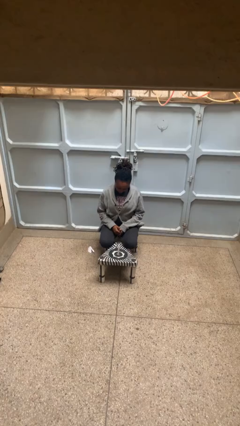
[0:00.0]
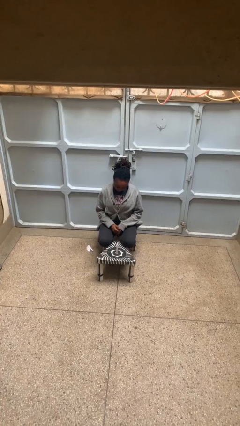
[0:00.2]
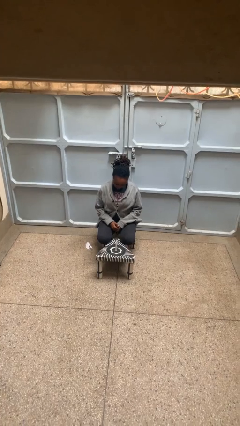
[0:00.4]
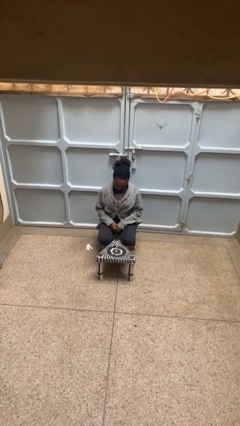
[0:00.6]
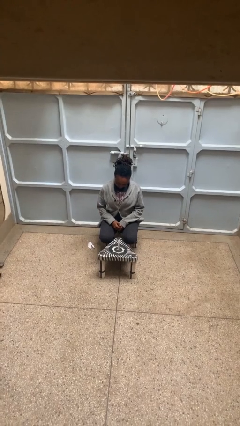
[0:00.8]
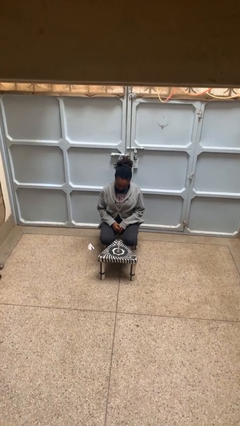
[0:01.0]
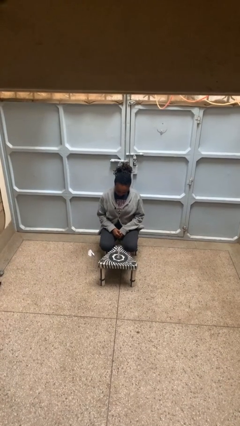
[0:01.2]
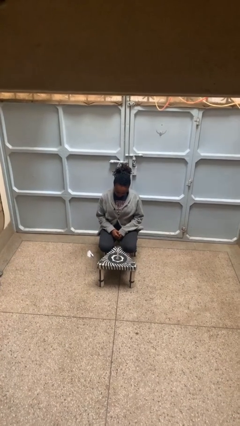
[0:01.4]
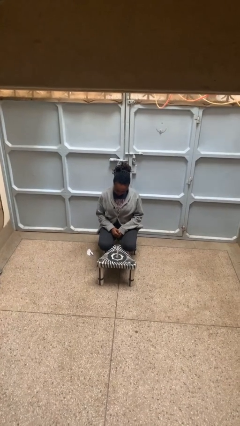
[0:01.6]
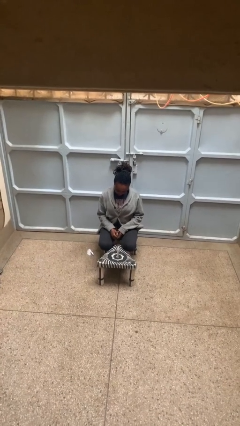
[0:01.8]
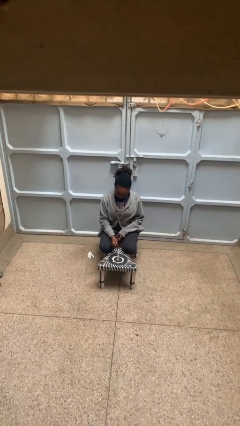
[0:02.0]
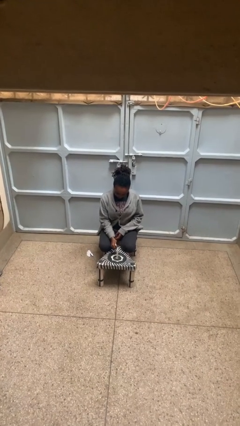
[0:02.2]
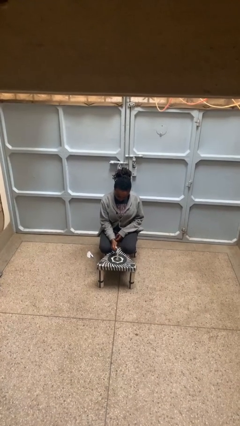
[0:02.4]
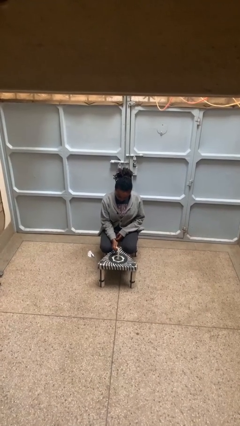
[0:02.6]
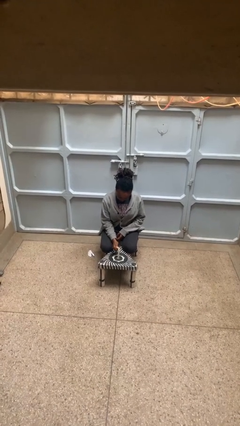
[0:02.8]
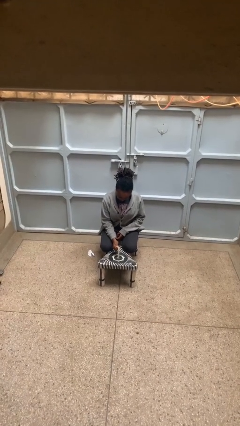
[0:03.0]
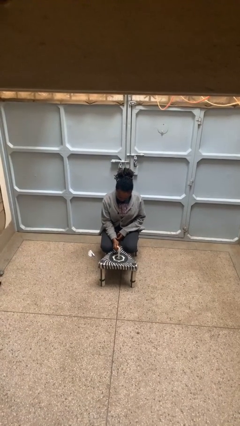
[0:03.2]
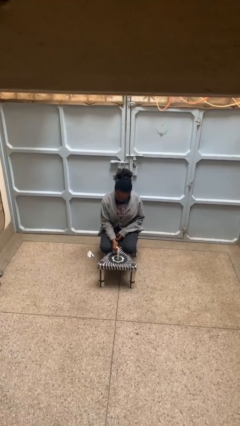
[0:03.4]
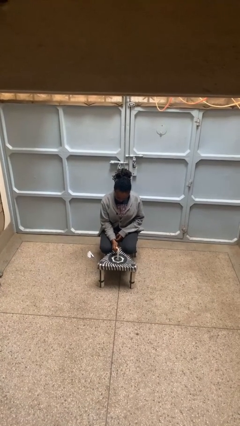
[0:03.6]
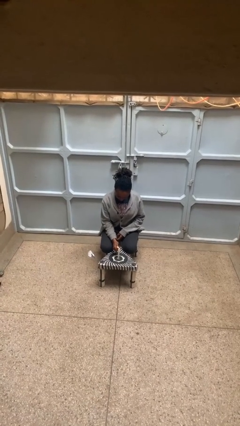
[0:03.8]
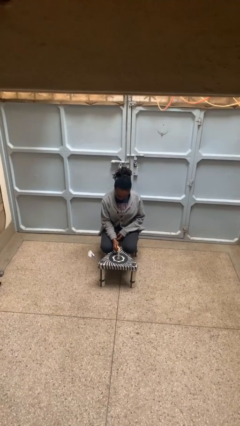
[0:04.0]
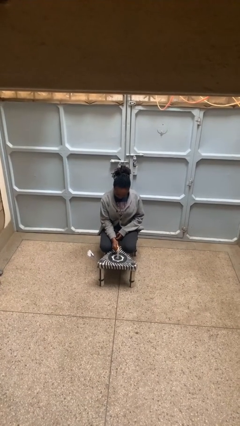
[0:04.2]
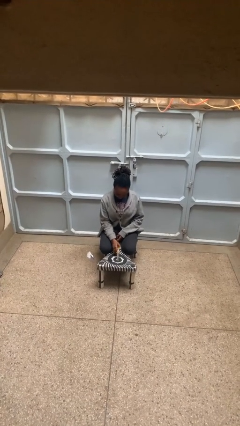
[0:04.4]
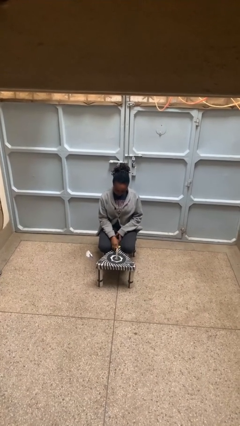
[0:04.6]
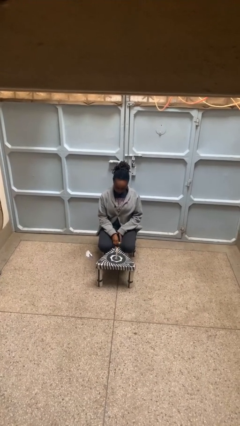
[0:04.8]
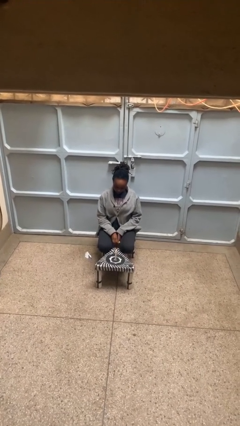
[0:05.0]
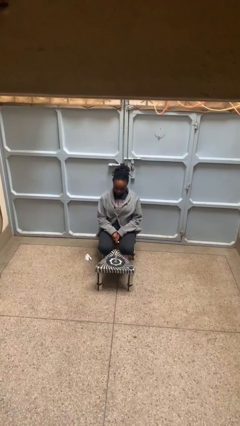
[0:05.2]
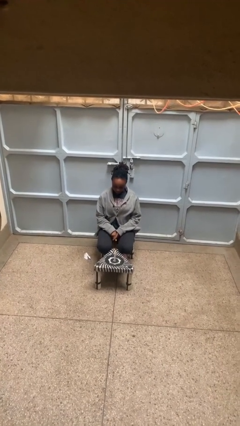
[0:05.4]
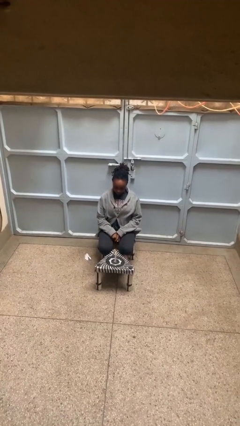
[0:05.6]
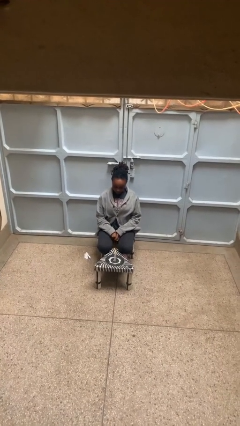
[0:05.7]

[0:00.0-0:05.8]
person lights candle

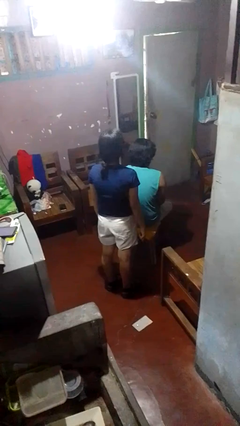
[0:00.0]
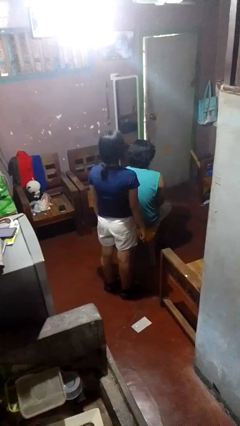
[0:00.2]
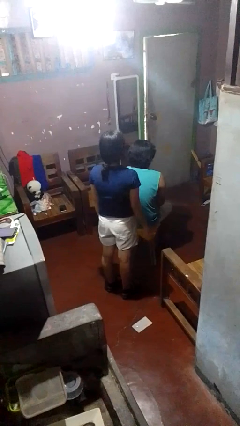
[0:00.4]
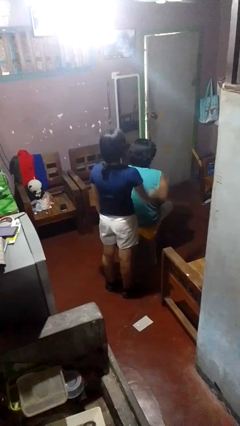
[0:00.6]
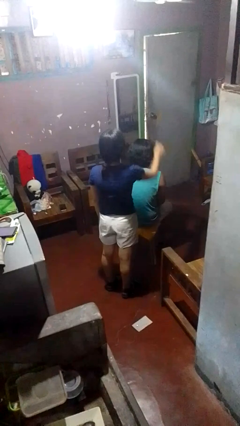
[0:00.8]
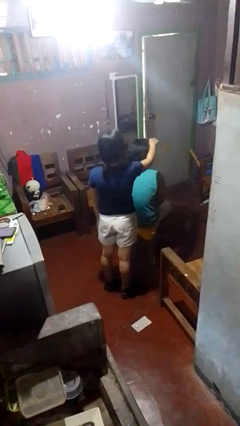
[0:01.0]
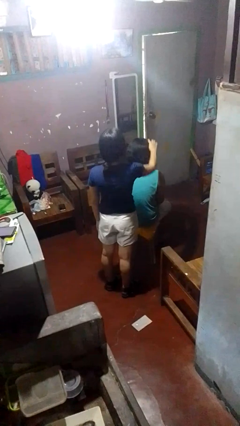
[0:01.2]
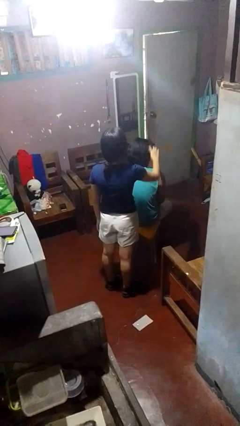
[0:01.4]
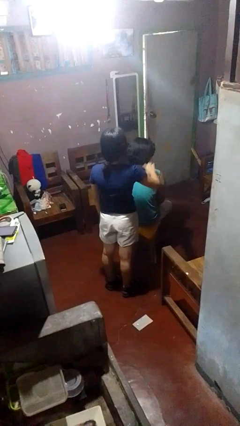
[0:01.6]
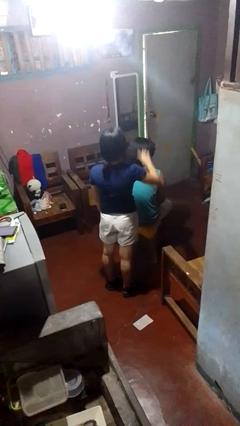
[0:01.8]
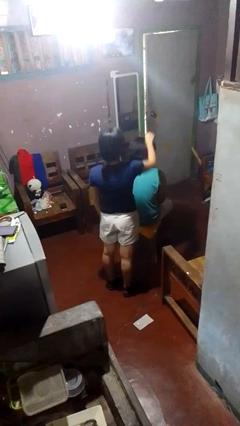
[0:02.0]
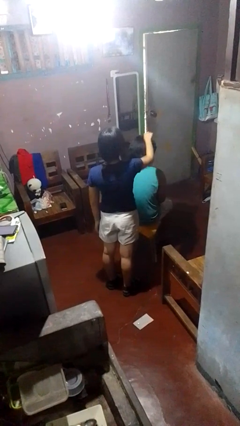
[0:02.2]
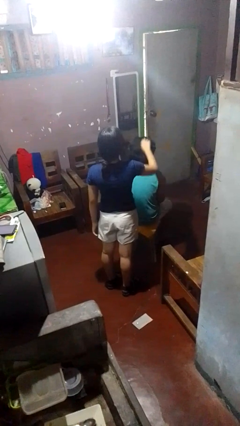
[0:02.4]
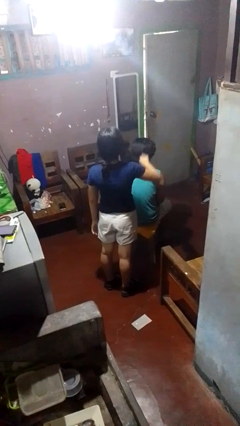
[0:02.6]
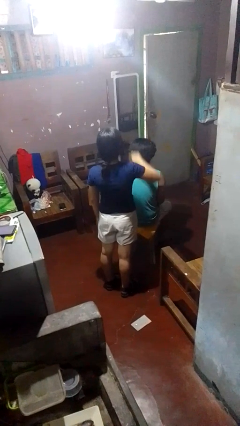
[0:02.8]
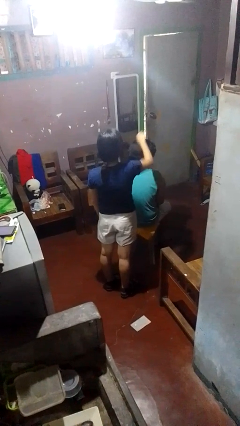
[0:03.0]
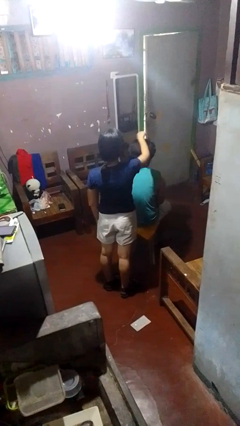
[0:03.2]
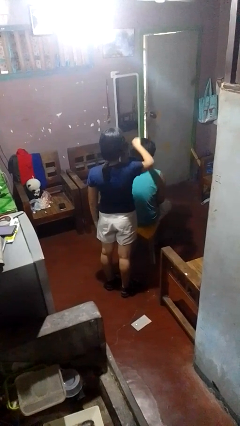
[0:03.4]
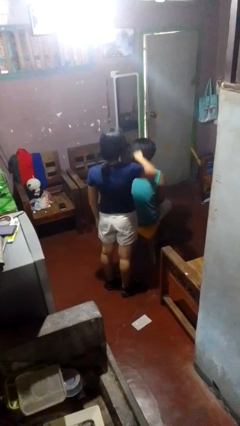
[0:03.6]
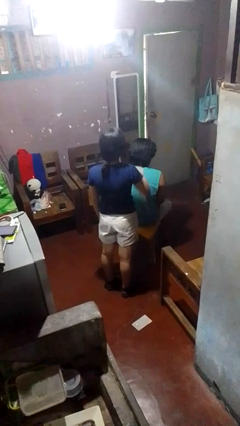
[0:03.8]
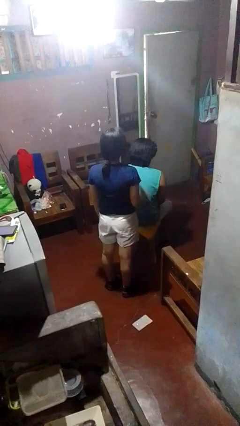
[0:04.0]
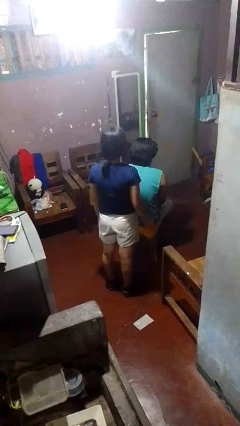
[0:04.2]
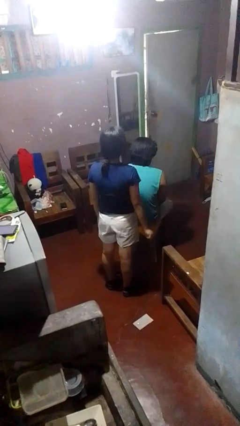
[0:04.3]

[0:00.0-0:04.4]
person brushes hair of person

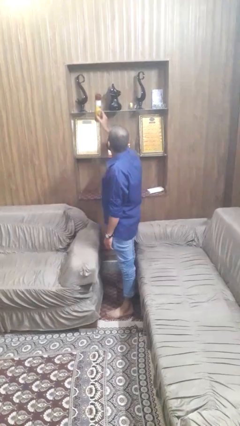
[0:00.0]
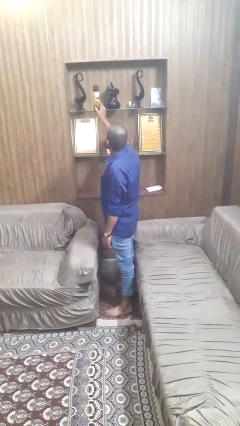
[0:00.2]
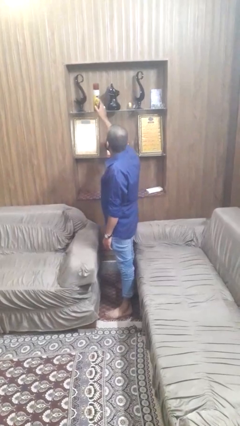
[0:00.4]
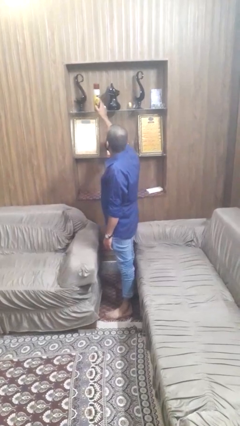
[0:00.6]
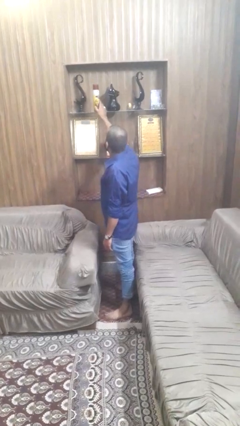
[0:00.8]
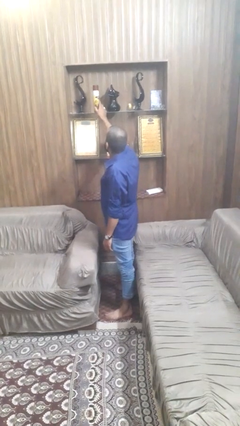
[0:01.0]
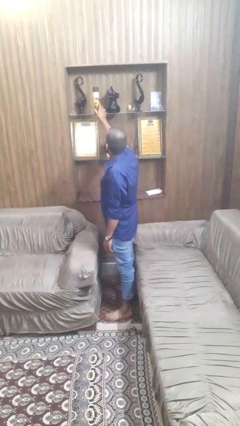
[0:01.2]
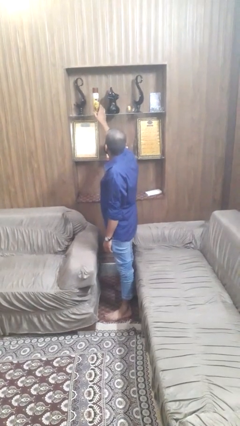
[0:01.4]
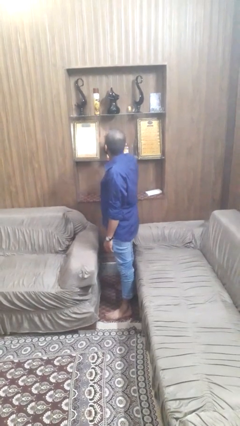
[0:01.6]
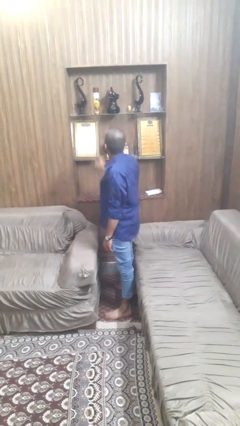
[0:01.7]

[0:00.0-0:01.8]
person puts down object on shelf

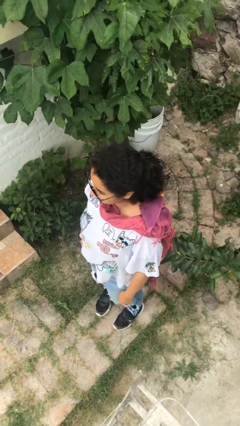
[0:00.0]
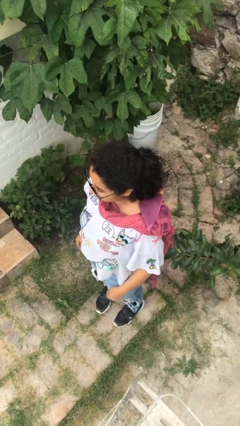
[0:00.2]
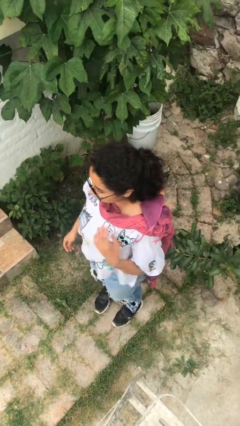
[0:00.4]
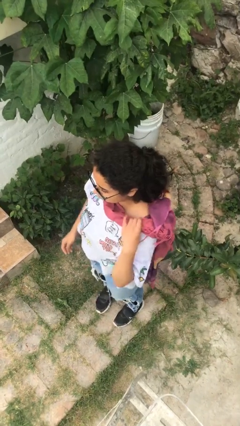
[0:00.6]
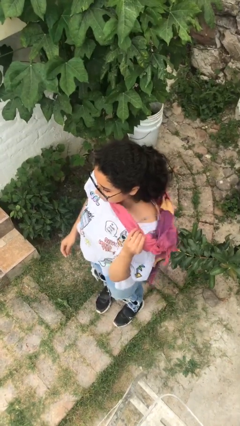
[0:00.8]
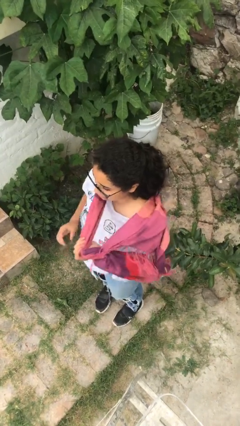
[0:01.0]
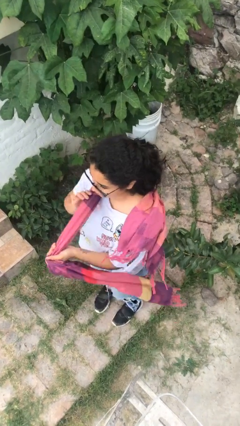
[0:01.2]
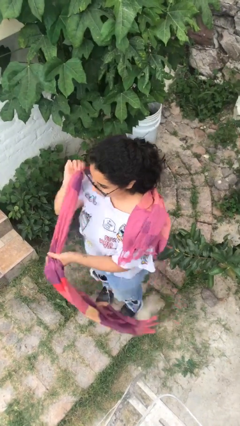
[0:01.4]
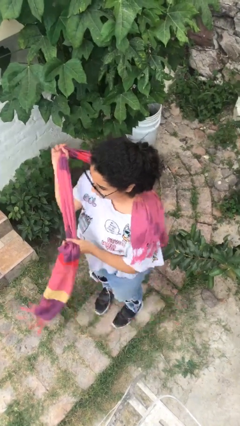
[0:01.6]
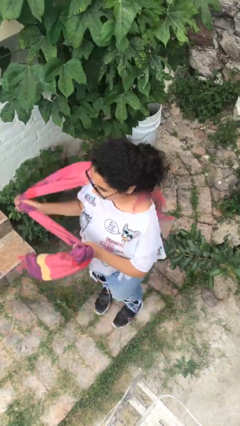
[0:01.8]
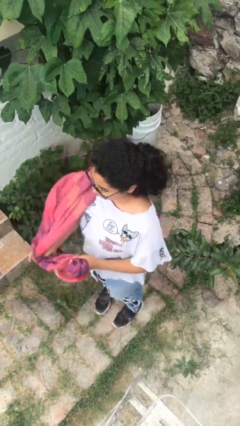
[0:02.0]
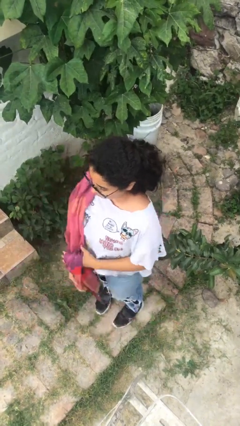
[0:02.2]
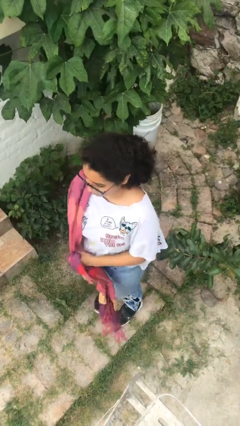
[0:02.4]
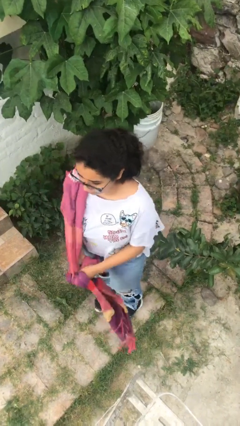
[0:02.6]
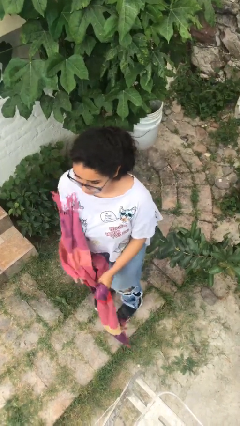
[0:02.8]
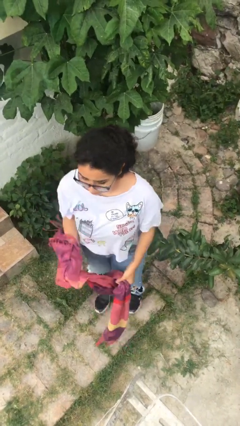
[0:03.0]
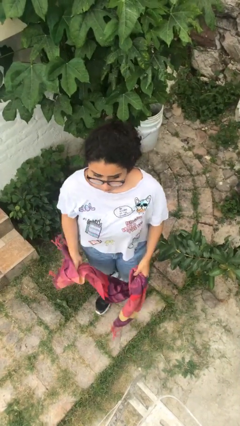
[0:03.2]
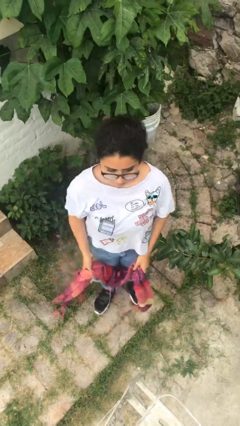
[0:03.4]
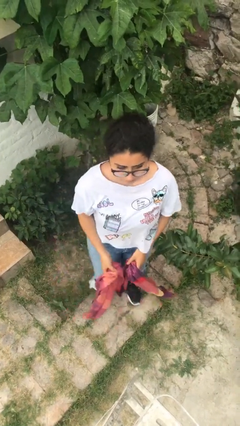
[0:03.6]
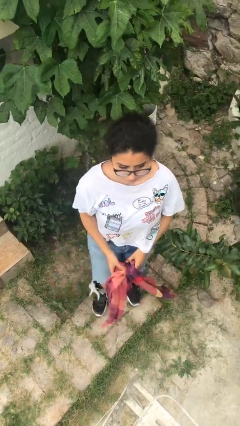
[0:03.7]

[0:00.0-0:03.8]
person takes off scarf

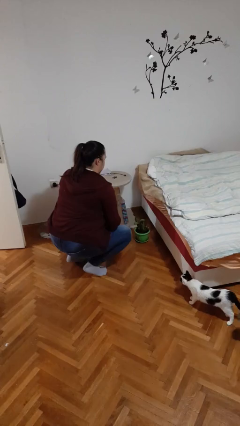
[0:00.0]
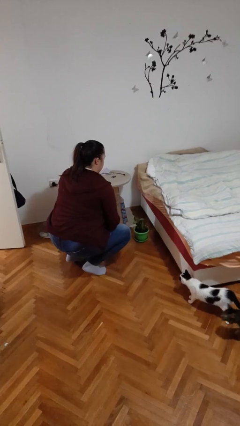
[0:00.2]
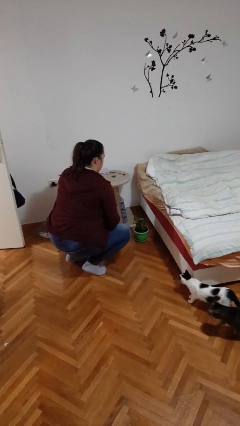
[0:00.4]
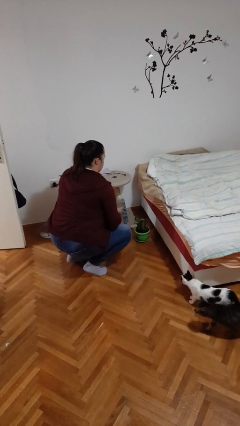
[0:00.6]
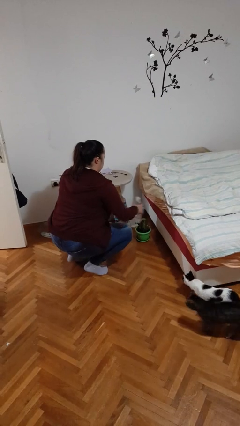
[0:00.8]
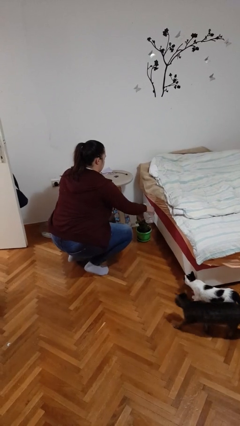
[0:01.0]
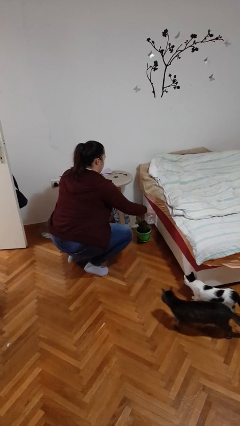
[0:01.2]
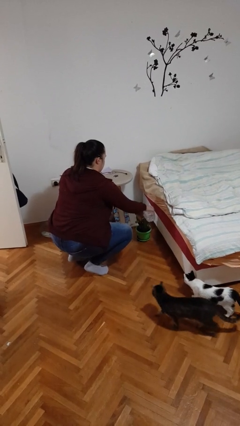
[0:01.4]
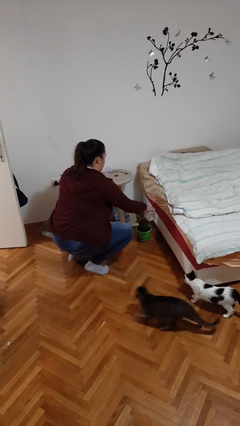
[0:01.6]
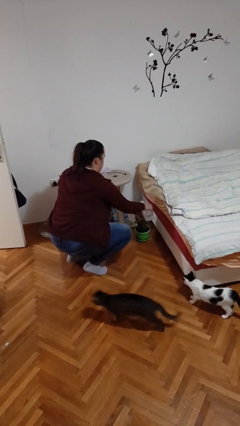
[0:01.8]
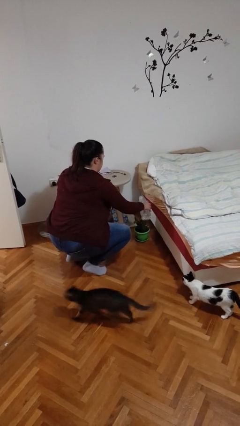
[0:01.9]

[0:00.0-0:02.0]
person waters houseplant
